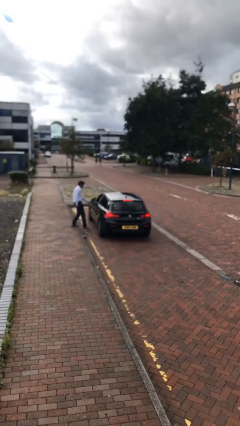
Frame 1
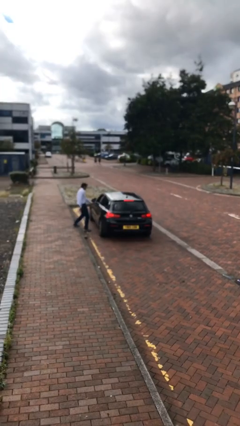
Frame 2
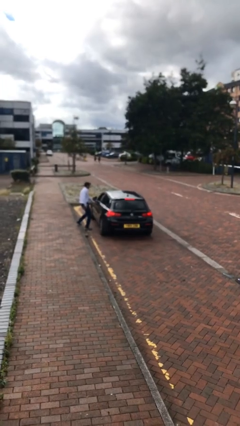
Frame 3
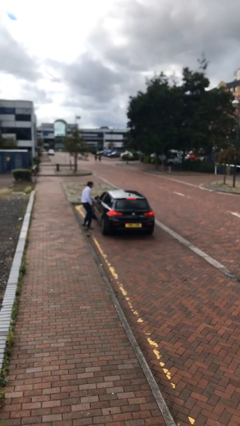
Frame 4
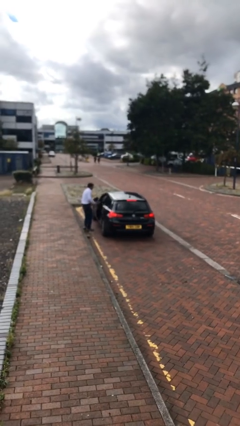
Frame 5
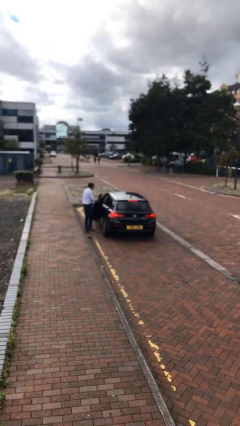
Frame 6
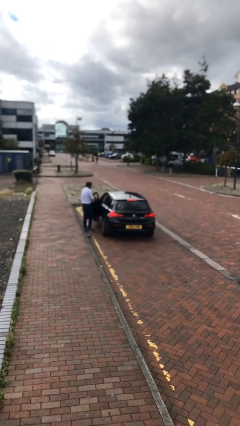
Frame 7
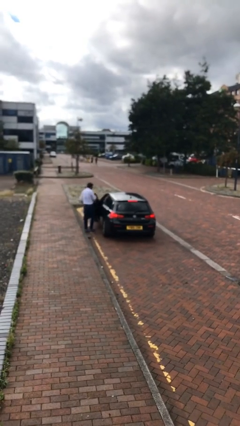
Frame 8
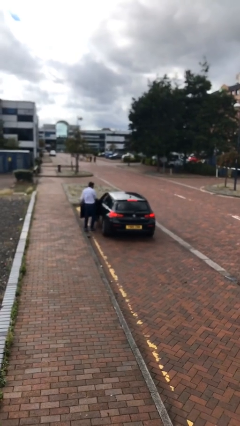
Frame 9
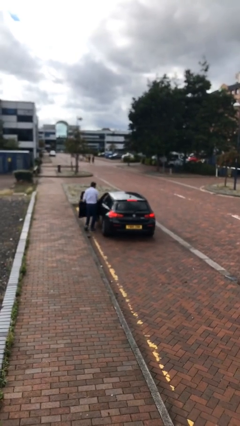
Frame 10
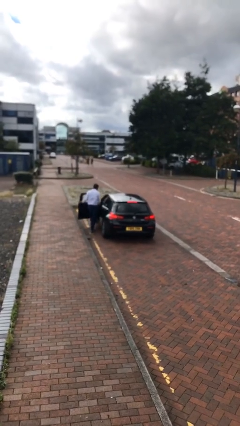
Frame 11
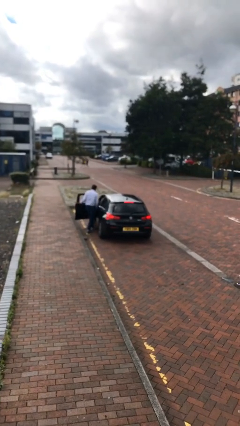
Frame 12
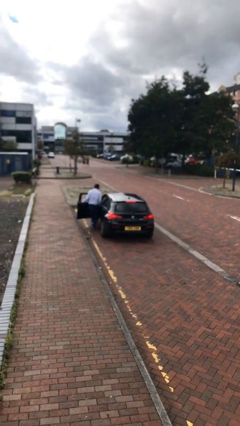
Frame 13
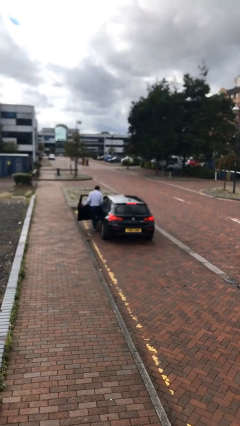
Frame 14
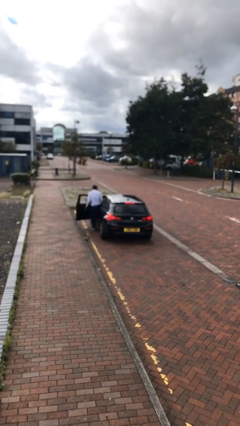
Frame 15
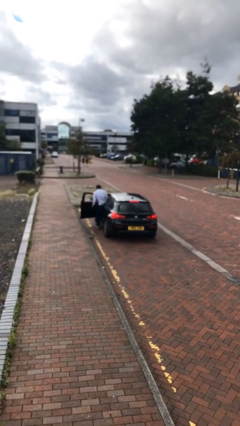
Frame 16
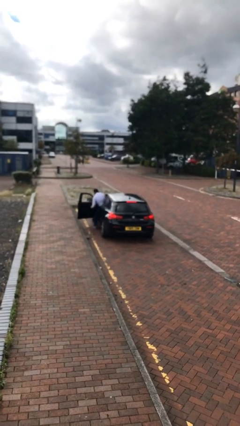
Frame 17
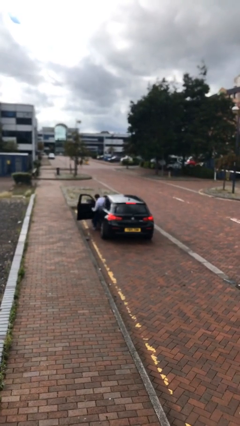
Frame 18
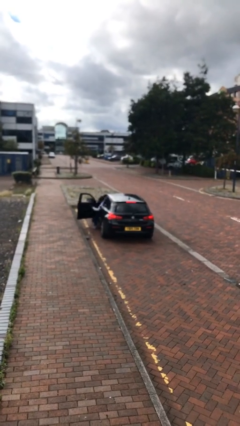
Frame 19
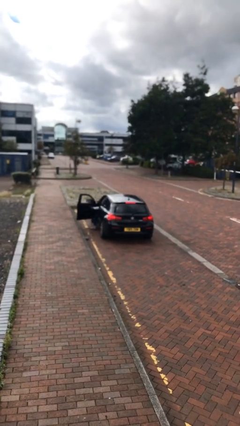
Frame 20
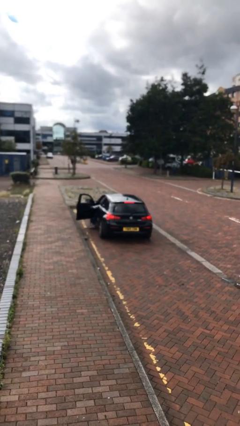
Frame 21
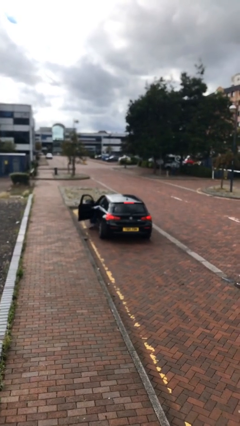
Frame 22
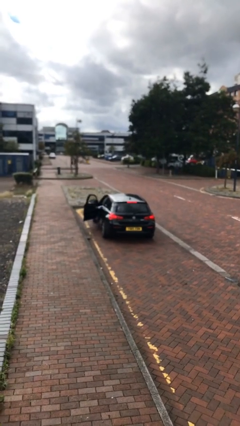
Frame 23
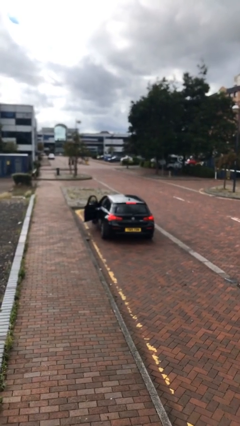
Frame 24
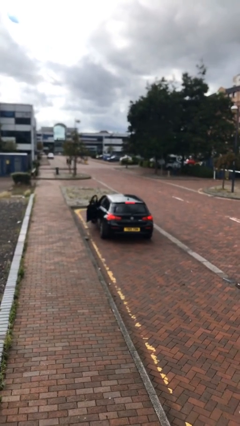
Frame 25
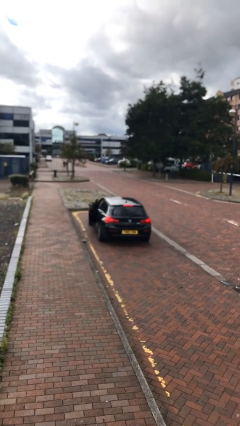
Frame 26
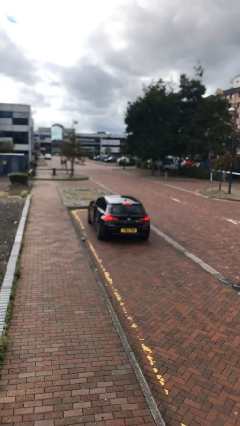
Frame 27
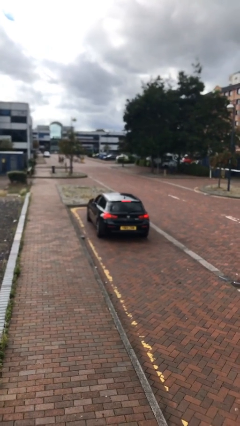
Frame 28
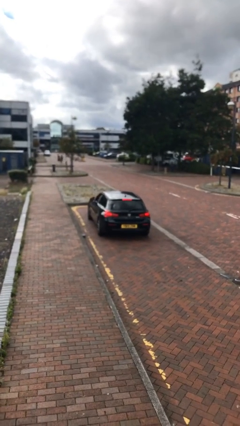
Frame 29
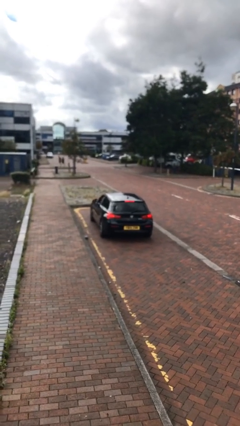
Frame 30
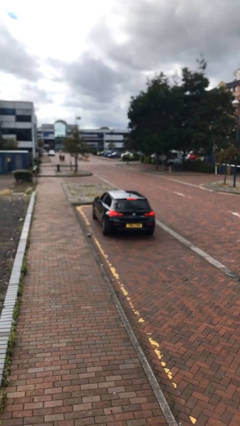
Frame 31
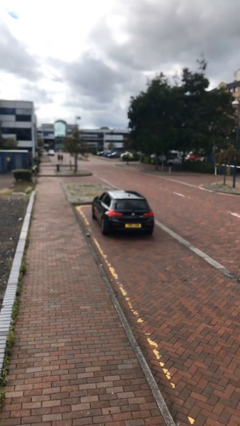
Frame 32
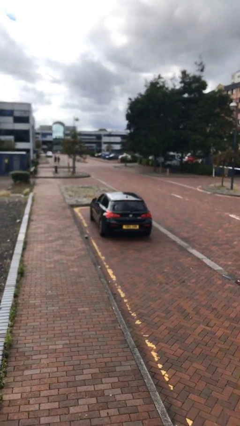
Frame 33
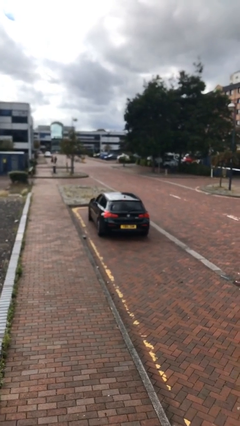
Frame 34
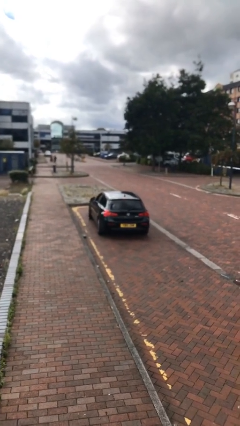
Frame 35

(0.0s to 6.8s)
car picks up person

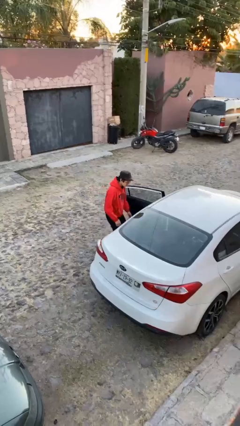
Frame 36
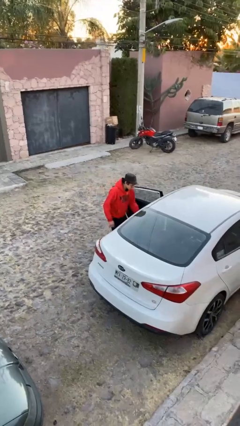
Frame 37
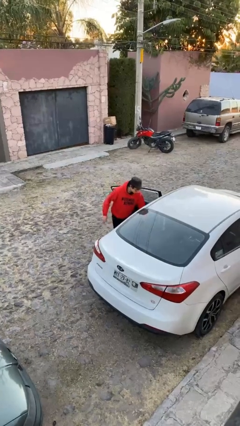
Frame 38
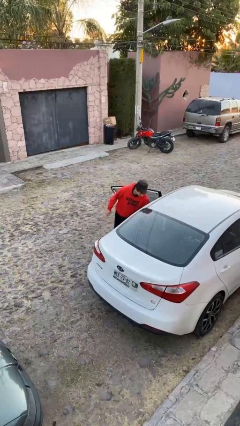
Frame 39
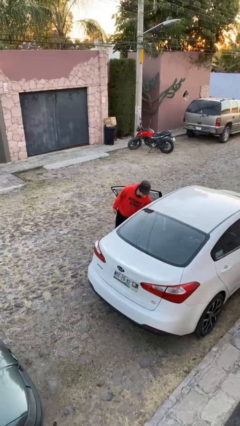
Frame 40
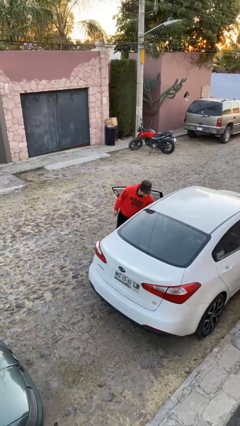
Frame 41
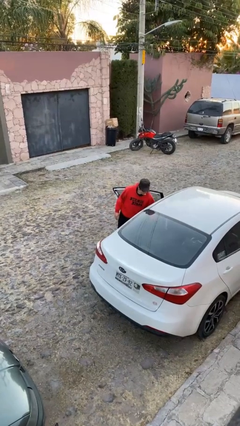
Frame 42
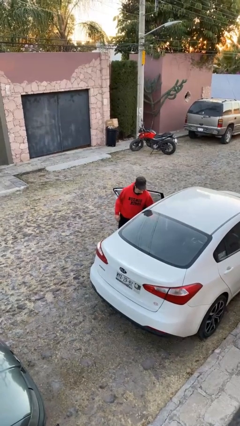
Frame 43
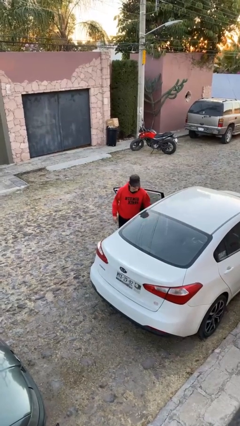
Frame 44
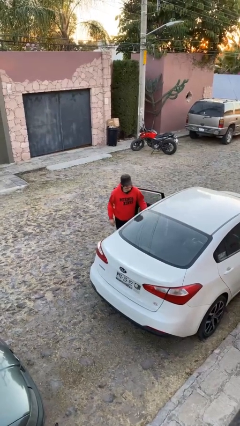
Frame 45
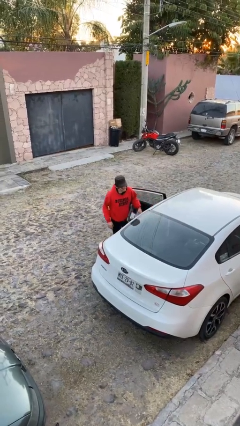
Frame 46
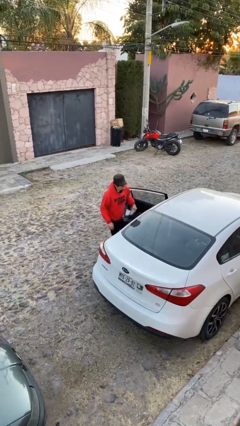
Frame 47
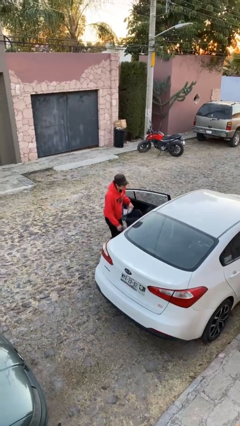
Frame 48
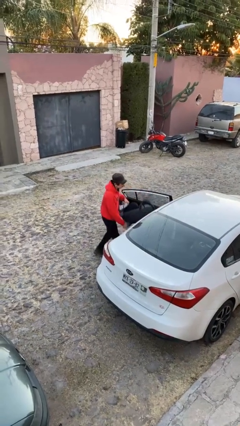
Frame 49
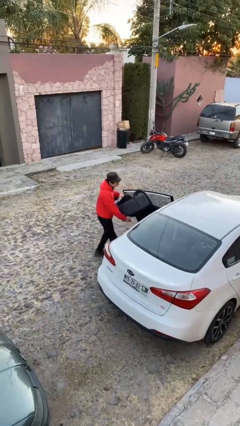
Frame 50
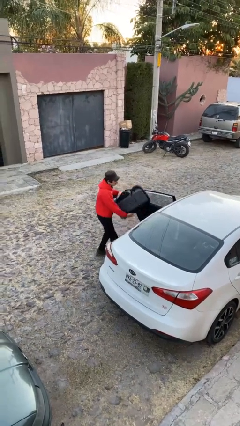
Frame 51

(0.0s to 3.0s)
person unloads car

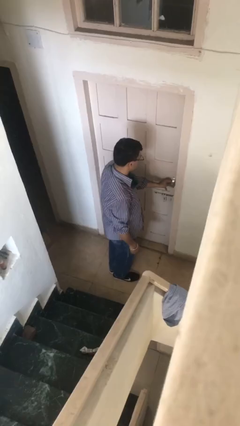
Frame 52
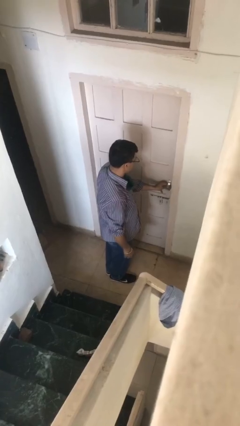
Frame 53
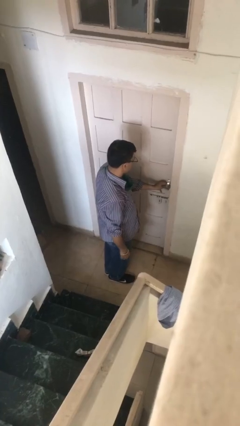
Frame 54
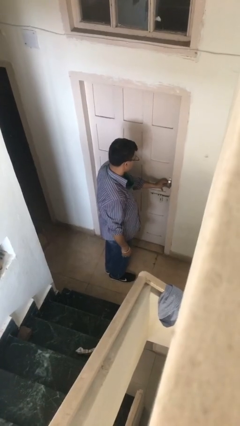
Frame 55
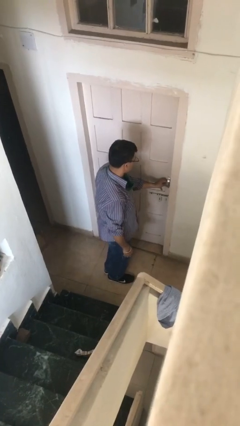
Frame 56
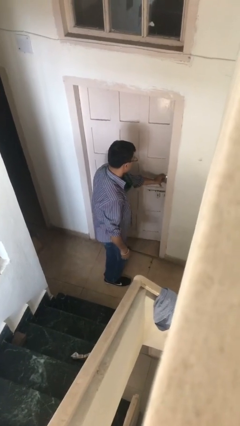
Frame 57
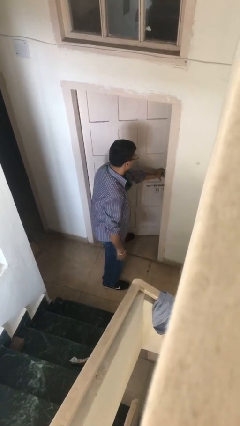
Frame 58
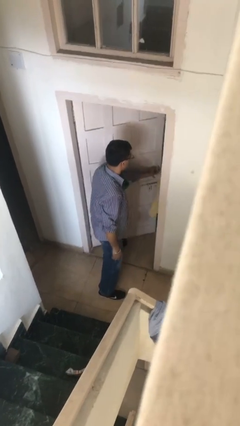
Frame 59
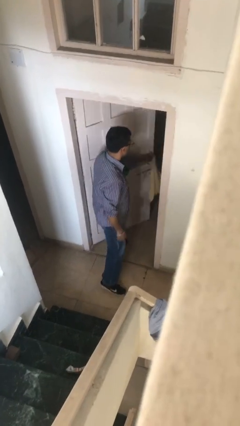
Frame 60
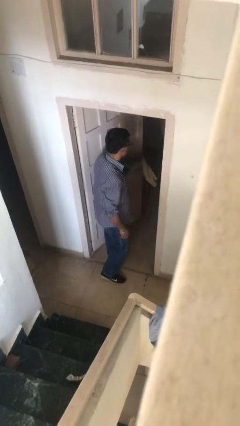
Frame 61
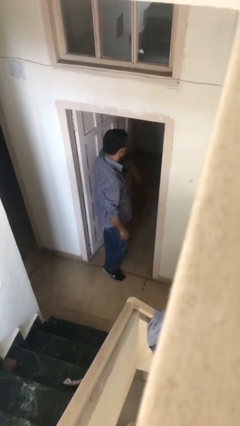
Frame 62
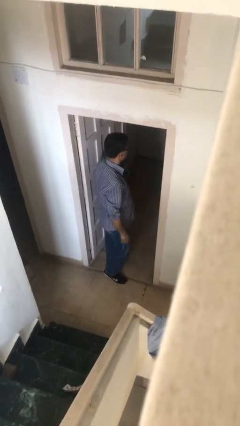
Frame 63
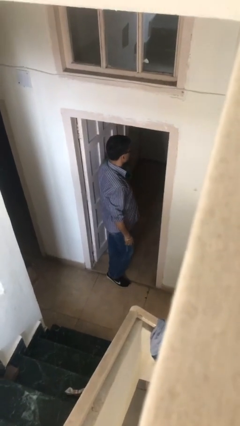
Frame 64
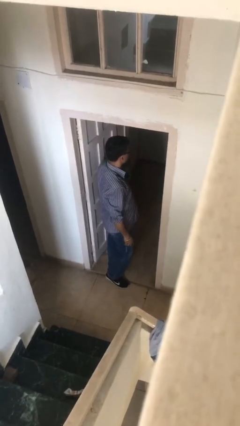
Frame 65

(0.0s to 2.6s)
person opens facility door

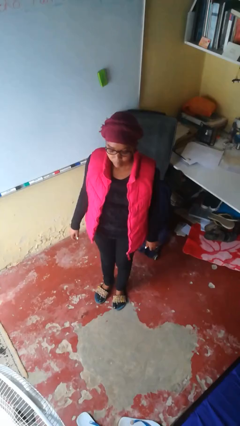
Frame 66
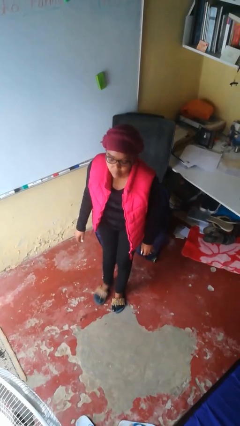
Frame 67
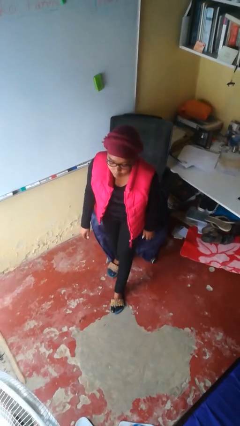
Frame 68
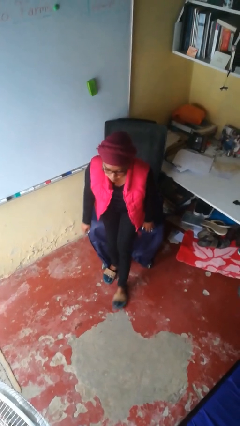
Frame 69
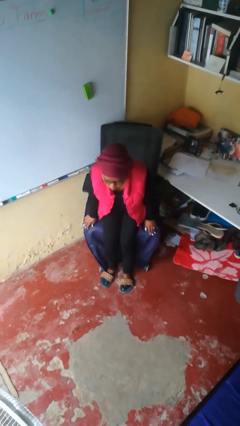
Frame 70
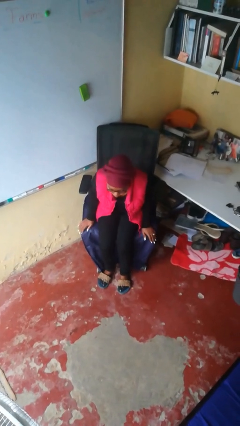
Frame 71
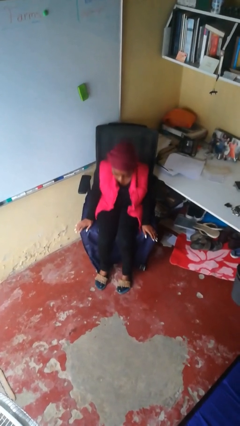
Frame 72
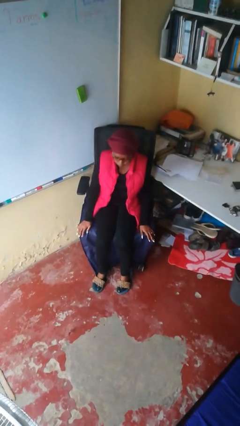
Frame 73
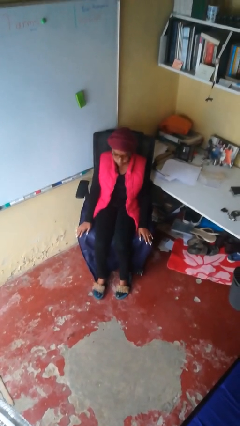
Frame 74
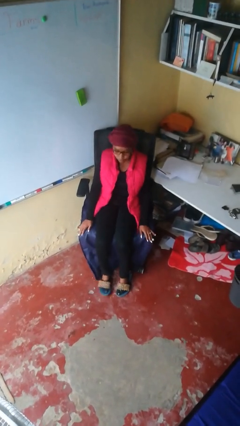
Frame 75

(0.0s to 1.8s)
person sits down

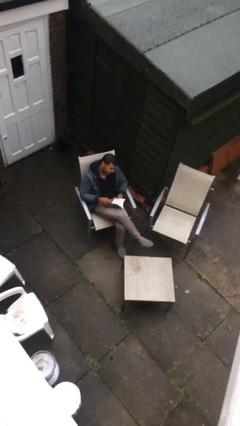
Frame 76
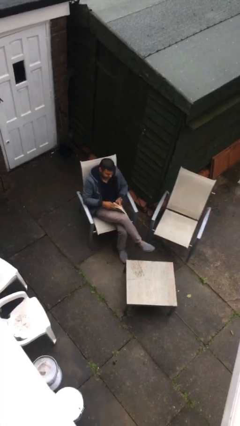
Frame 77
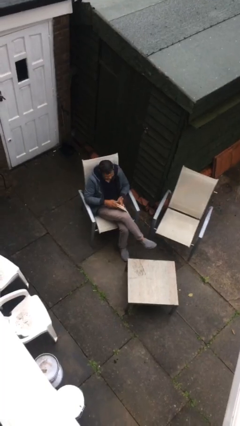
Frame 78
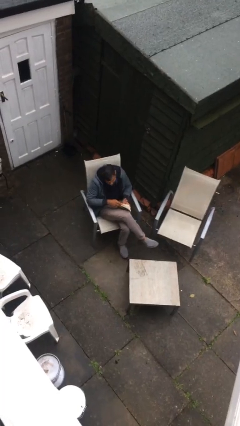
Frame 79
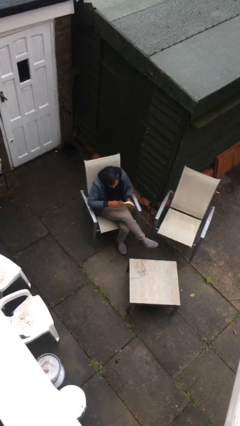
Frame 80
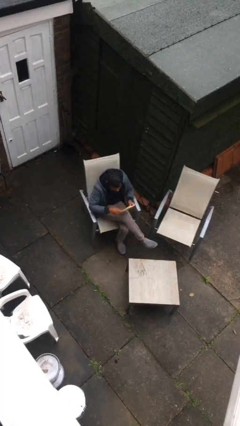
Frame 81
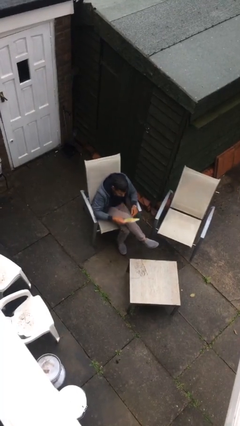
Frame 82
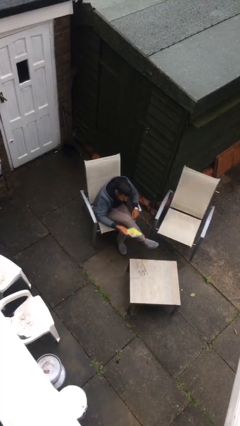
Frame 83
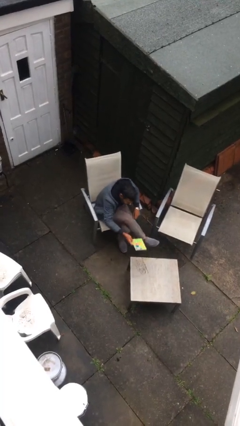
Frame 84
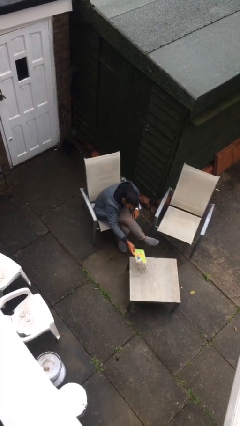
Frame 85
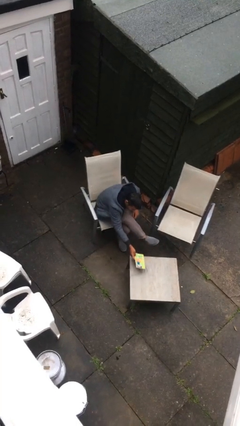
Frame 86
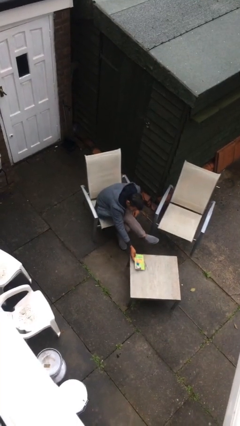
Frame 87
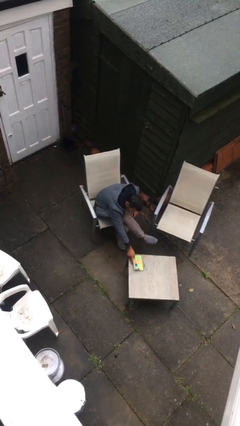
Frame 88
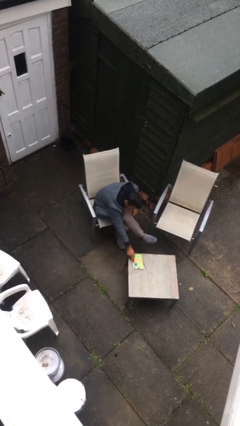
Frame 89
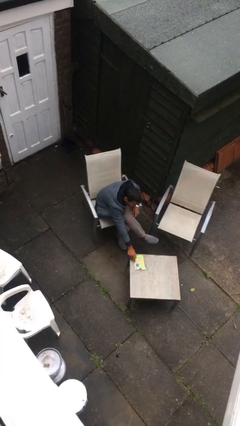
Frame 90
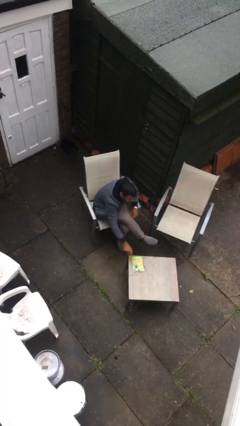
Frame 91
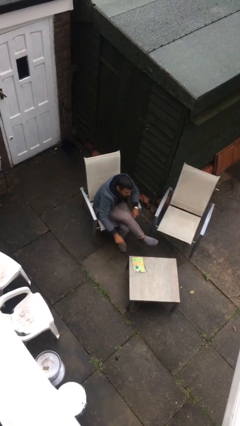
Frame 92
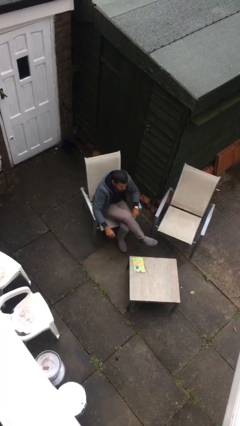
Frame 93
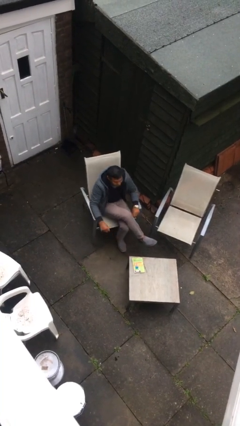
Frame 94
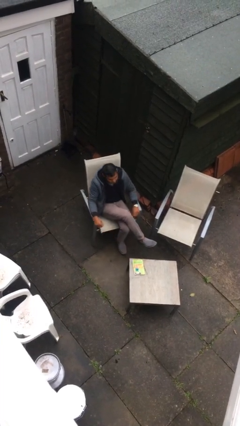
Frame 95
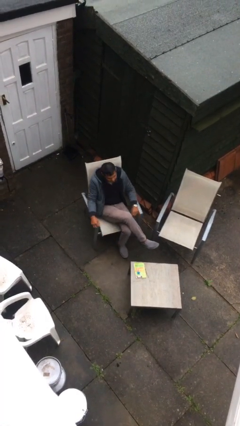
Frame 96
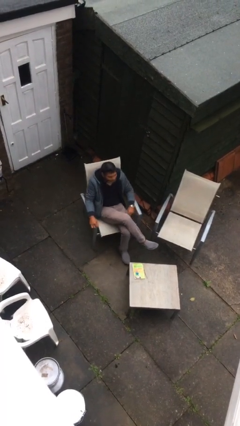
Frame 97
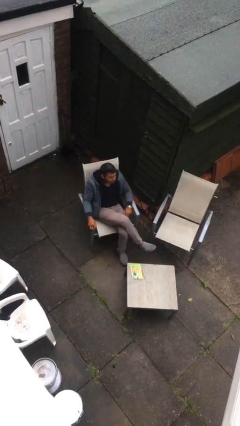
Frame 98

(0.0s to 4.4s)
person puts down object on table
